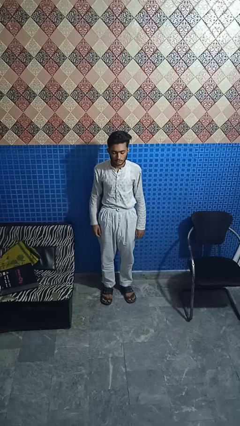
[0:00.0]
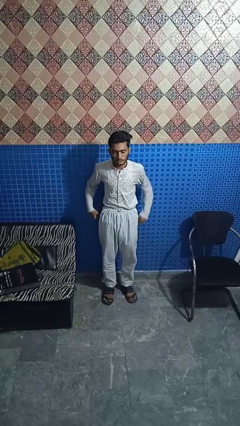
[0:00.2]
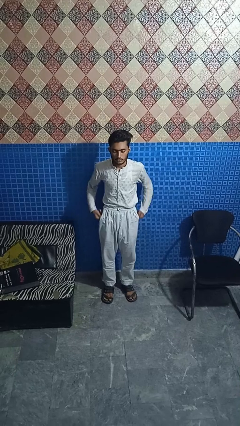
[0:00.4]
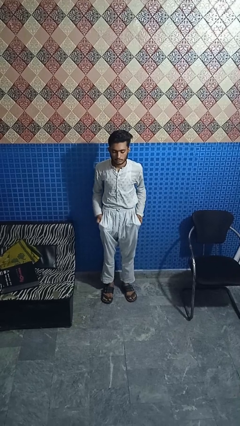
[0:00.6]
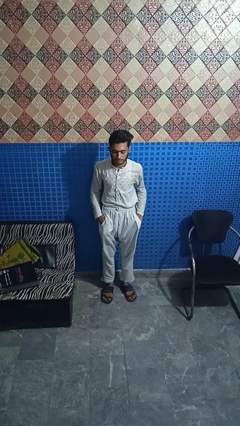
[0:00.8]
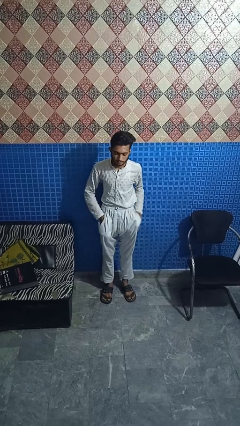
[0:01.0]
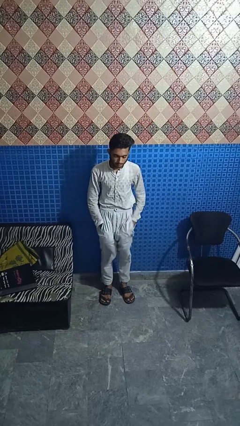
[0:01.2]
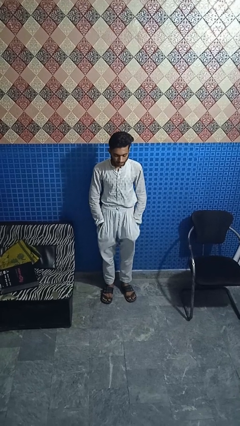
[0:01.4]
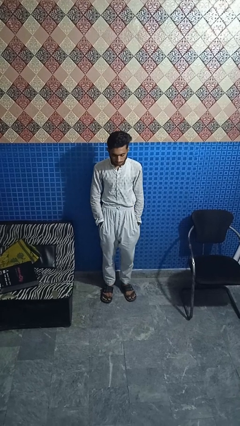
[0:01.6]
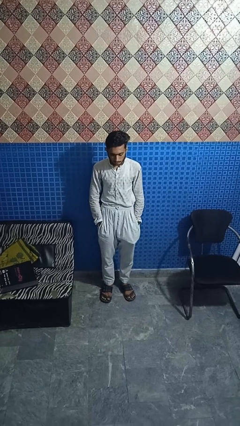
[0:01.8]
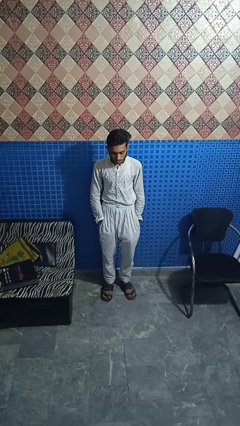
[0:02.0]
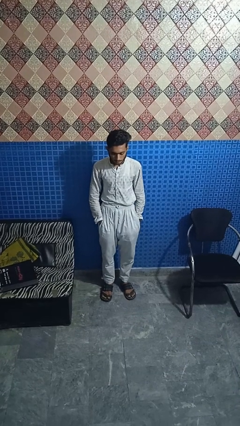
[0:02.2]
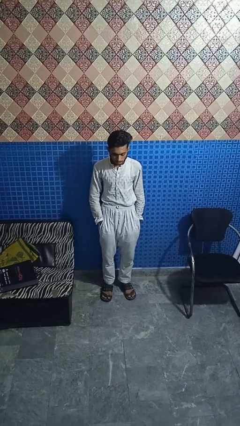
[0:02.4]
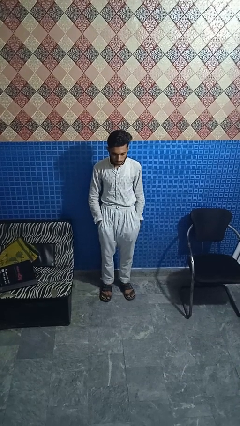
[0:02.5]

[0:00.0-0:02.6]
person puts hands in back pockets

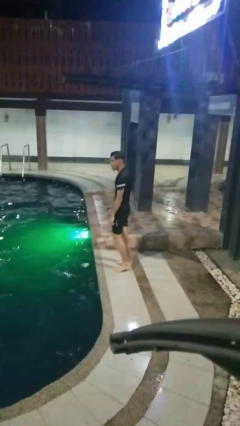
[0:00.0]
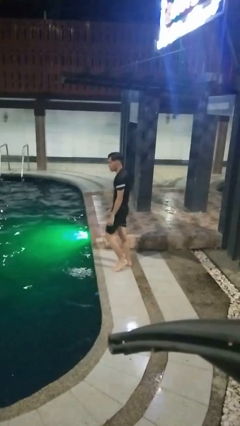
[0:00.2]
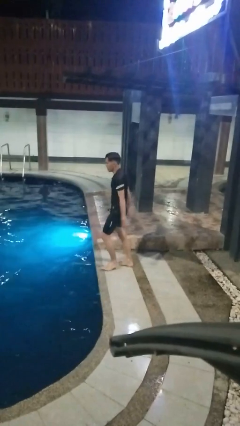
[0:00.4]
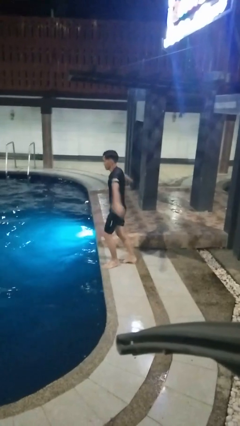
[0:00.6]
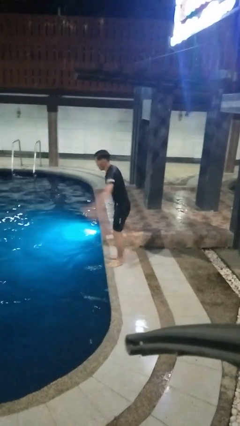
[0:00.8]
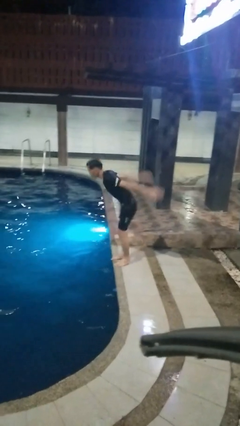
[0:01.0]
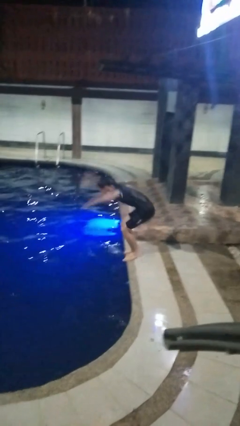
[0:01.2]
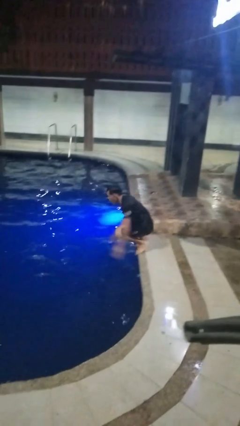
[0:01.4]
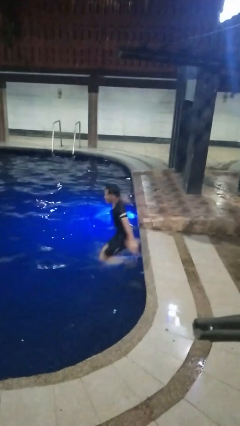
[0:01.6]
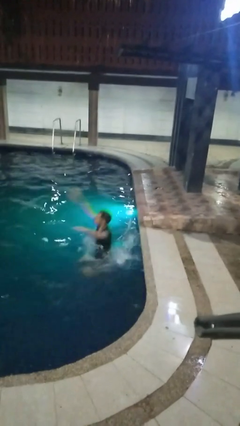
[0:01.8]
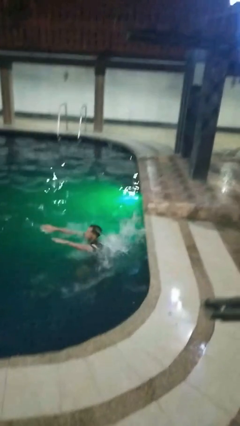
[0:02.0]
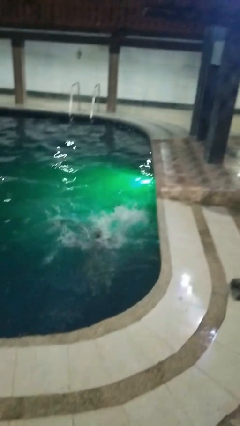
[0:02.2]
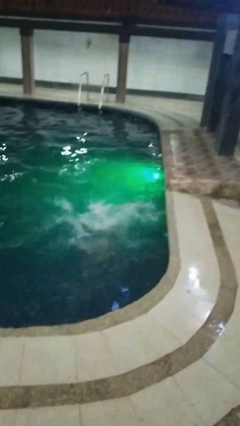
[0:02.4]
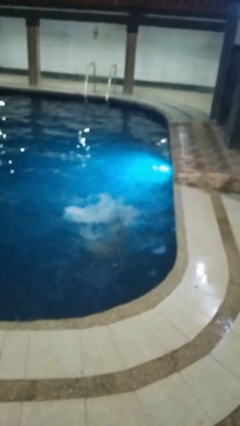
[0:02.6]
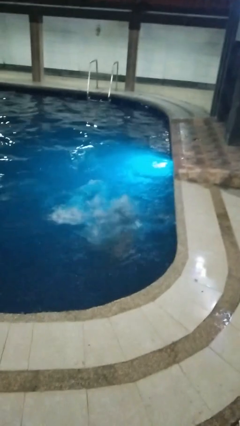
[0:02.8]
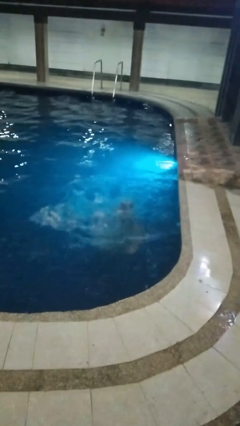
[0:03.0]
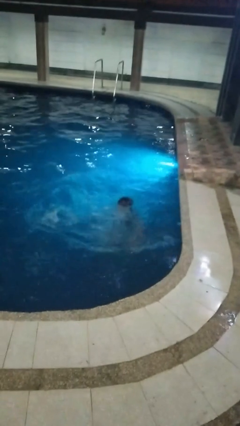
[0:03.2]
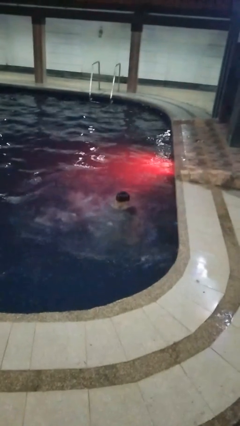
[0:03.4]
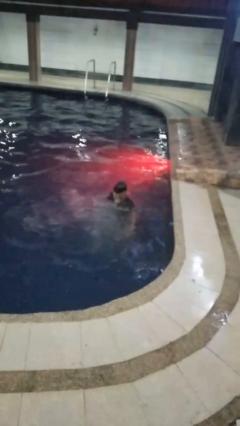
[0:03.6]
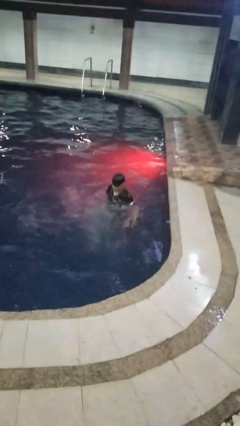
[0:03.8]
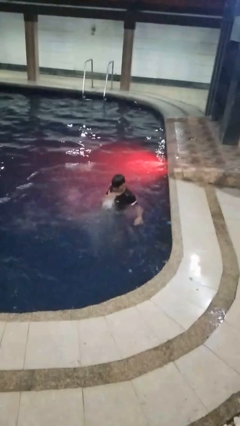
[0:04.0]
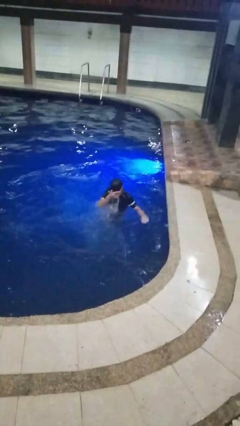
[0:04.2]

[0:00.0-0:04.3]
person falls into pool

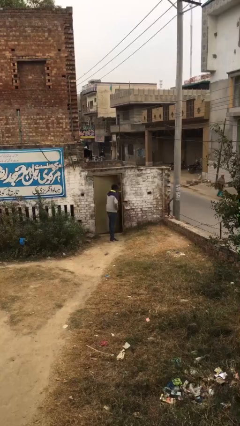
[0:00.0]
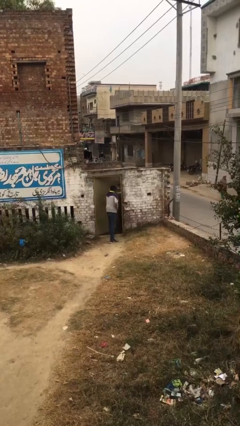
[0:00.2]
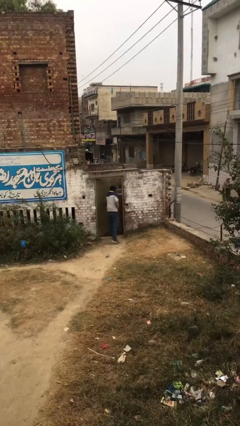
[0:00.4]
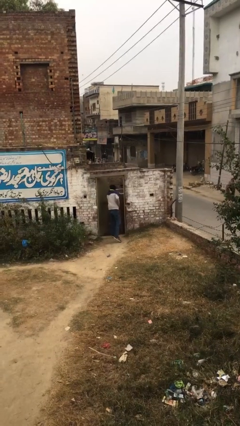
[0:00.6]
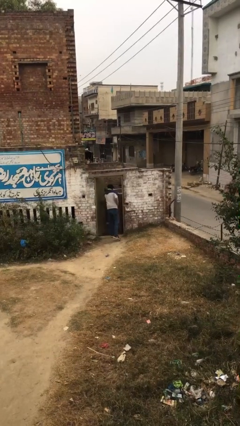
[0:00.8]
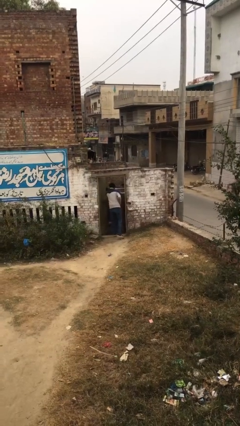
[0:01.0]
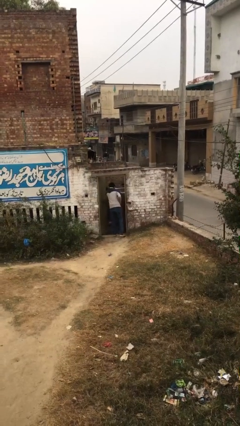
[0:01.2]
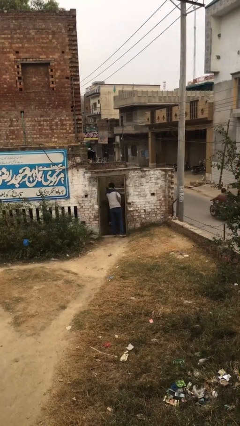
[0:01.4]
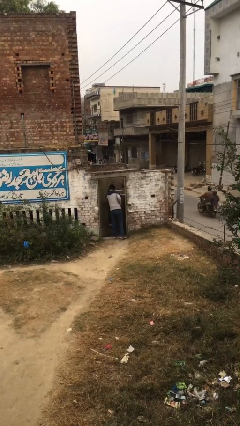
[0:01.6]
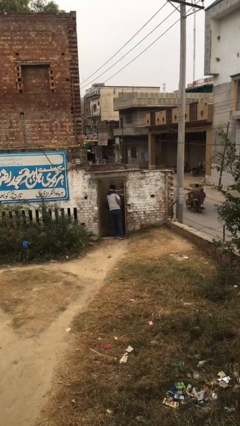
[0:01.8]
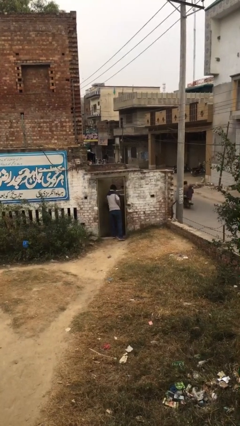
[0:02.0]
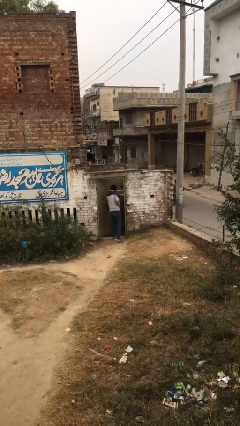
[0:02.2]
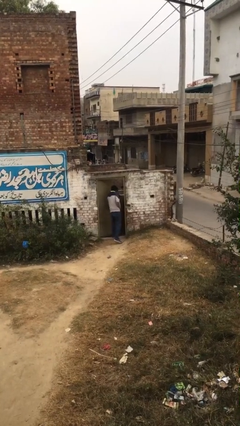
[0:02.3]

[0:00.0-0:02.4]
person opens facility door

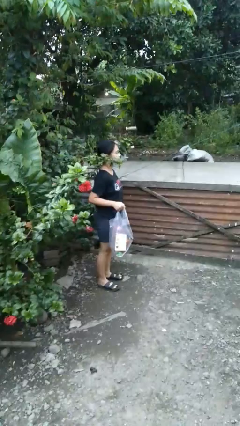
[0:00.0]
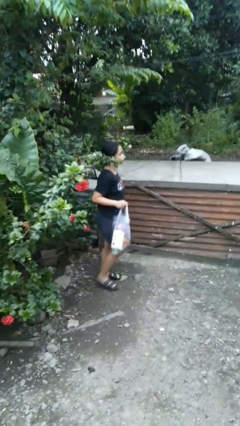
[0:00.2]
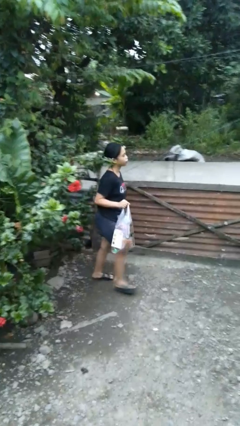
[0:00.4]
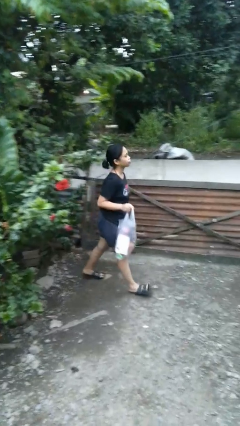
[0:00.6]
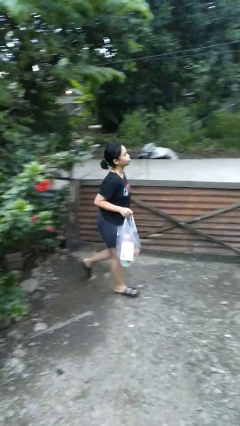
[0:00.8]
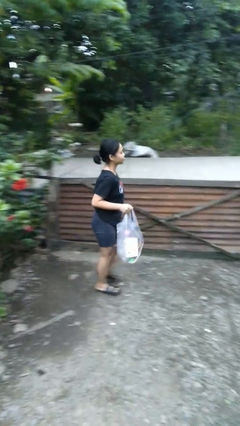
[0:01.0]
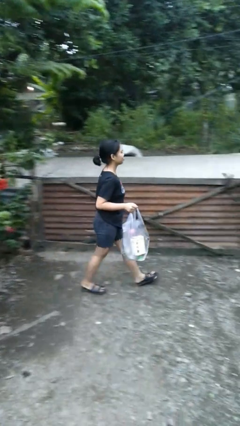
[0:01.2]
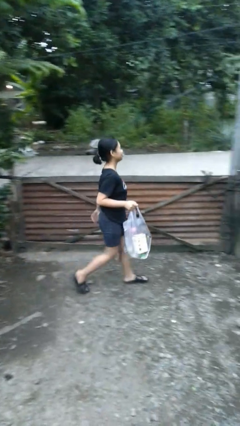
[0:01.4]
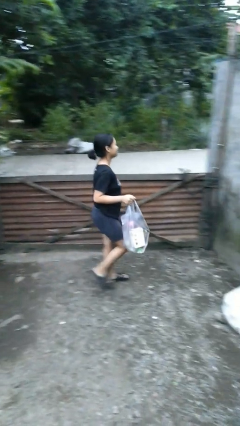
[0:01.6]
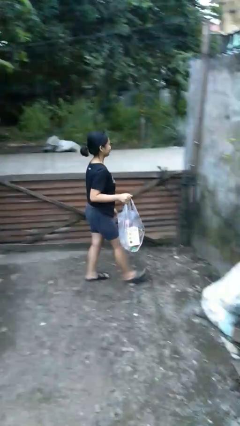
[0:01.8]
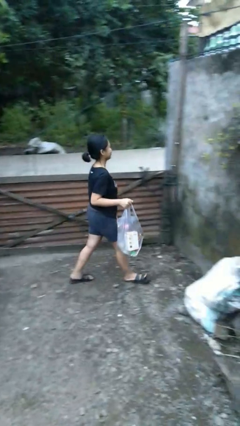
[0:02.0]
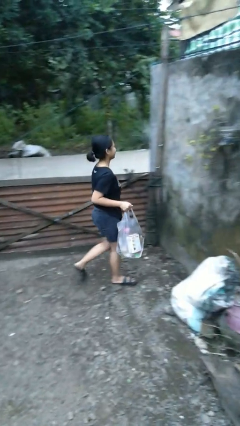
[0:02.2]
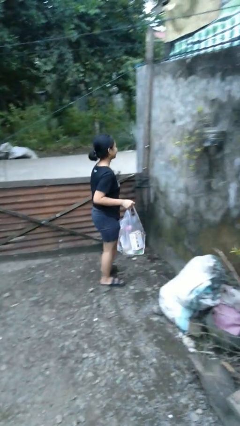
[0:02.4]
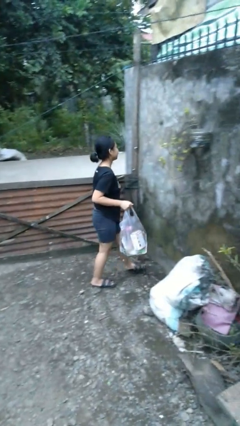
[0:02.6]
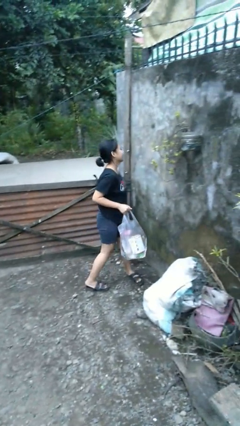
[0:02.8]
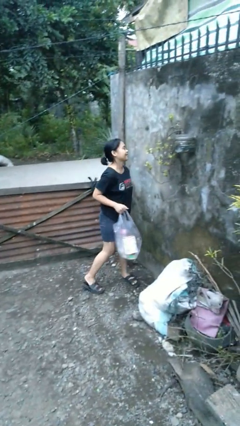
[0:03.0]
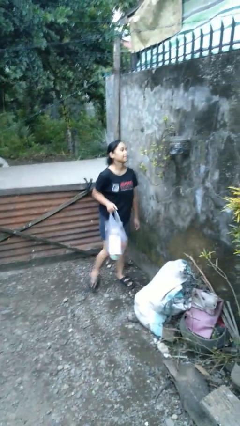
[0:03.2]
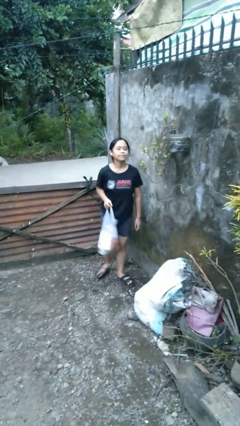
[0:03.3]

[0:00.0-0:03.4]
person carries groceries

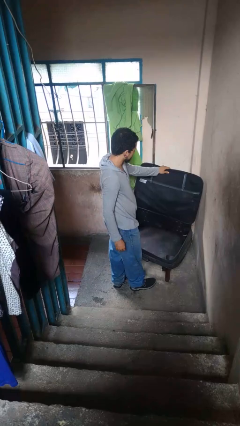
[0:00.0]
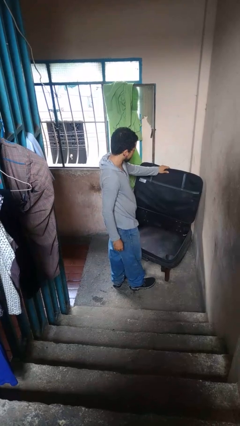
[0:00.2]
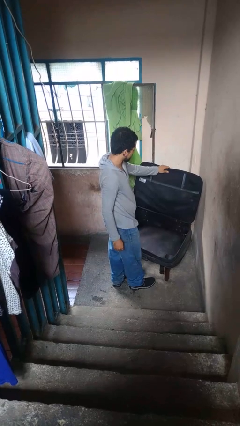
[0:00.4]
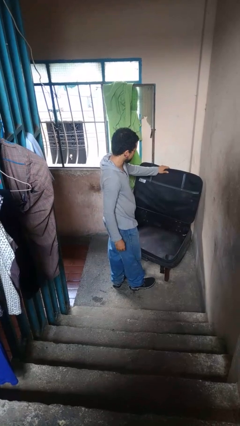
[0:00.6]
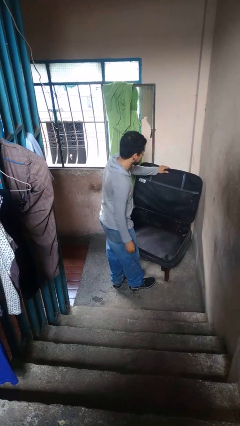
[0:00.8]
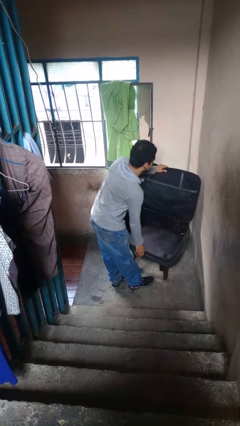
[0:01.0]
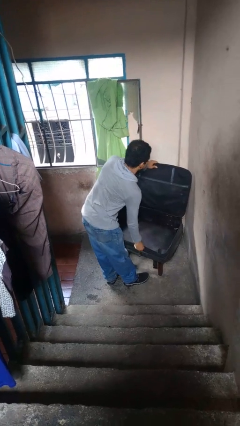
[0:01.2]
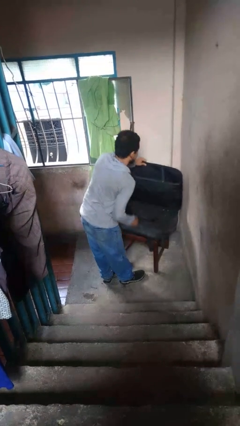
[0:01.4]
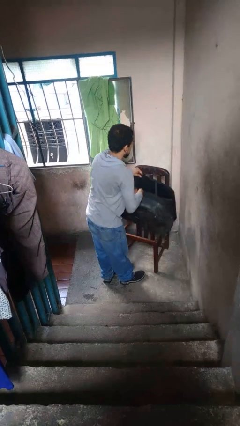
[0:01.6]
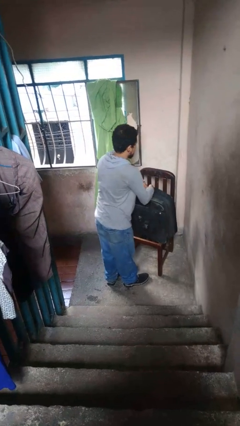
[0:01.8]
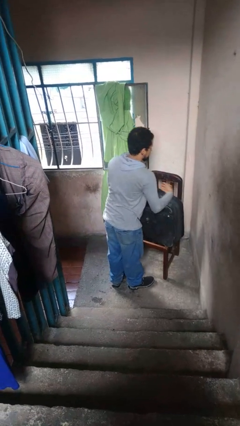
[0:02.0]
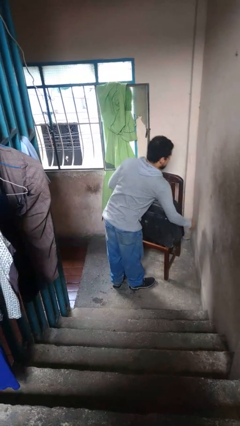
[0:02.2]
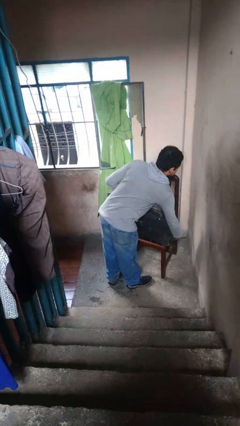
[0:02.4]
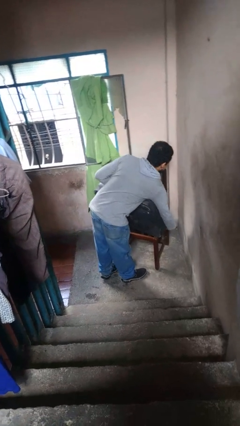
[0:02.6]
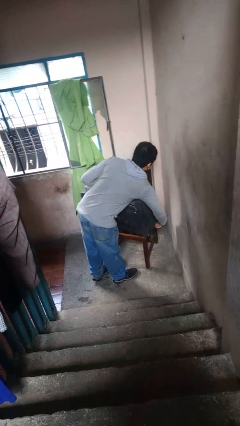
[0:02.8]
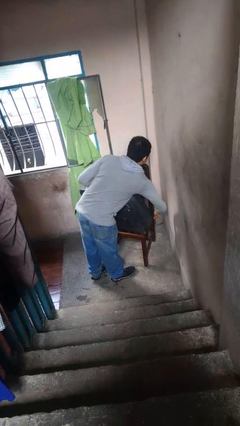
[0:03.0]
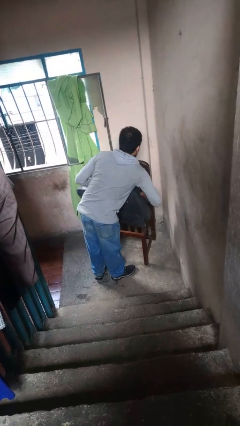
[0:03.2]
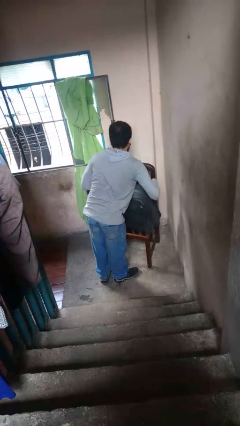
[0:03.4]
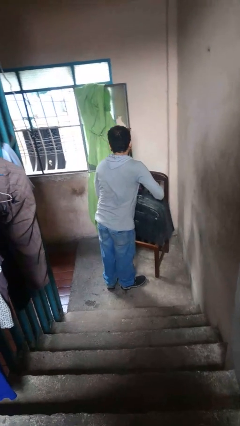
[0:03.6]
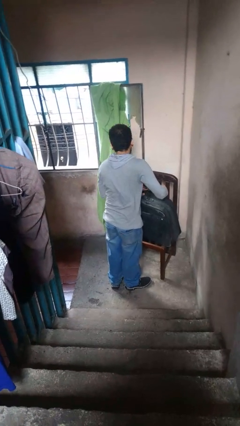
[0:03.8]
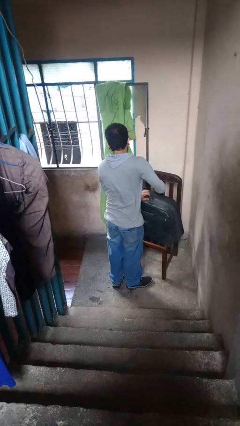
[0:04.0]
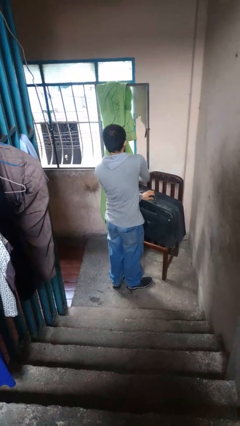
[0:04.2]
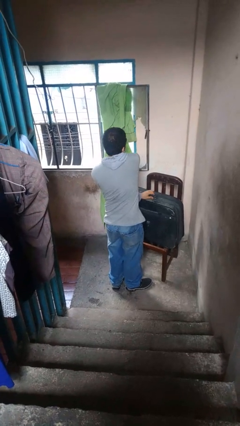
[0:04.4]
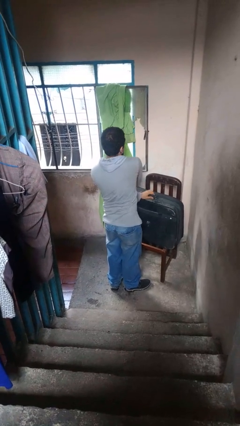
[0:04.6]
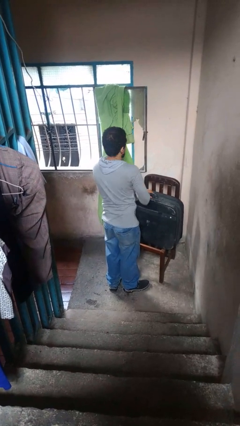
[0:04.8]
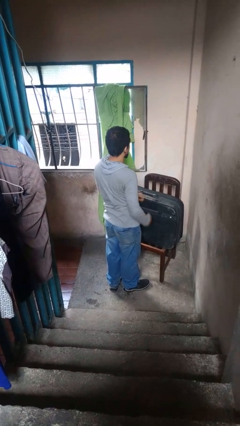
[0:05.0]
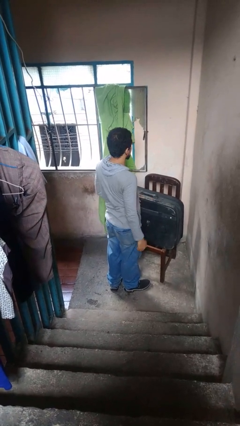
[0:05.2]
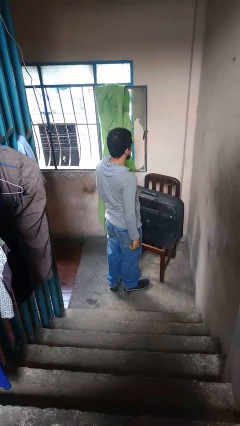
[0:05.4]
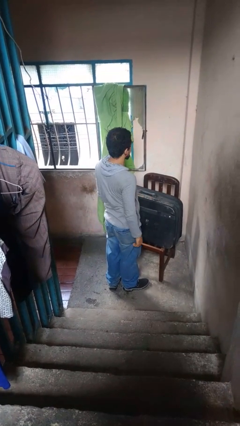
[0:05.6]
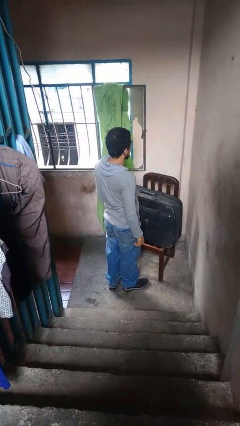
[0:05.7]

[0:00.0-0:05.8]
person closes suitcase
